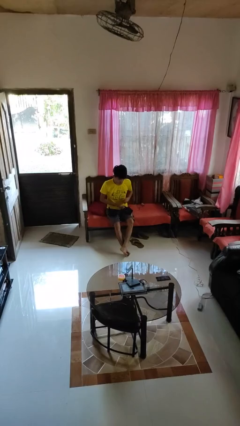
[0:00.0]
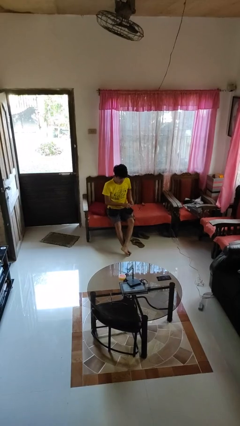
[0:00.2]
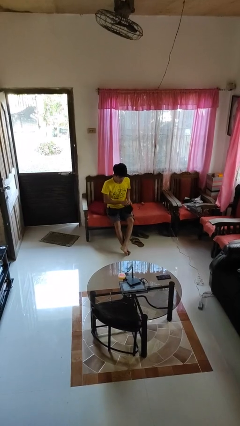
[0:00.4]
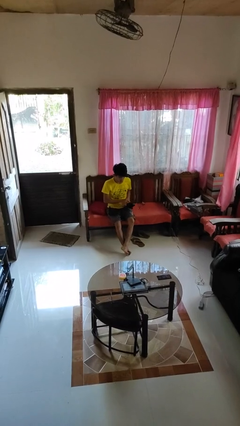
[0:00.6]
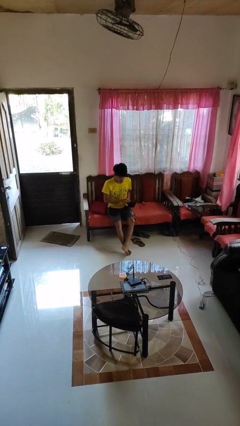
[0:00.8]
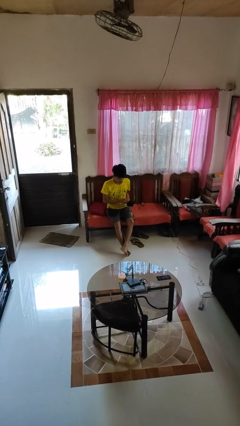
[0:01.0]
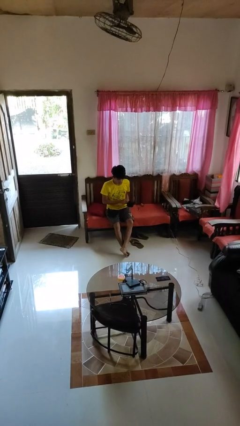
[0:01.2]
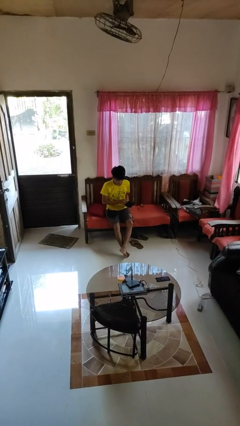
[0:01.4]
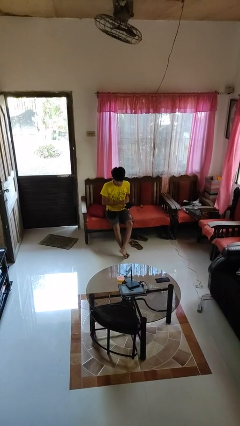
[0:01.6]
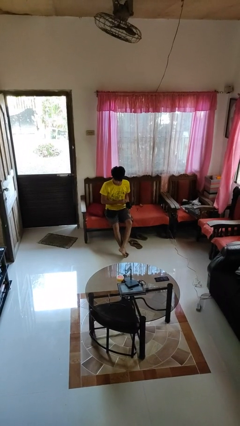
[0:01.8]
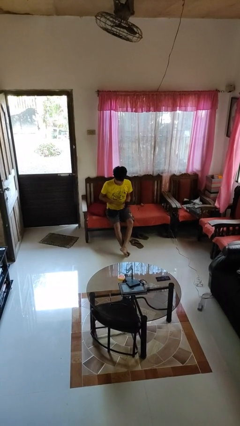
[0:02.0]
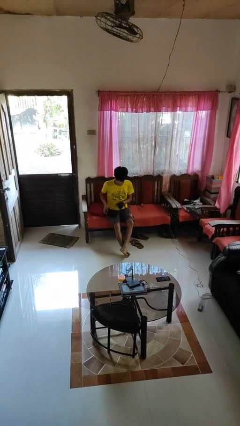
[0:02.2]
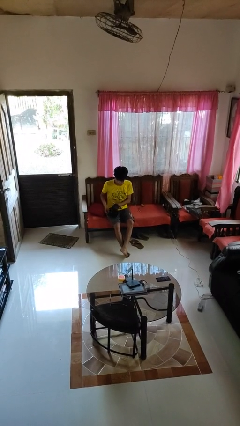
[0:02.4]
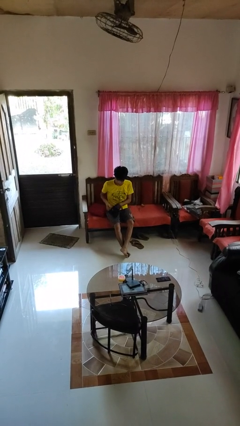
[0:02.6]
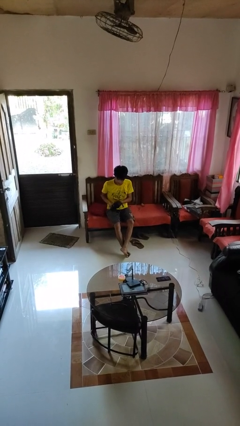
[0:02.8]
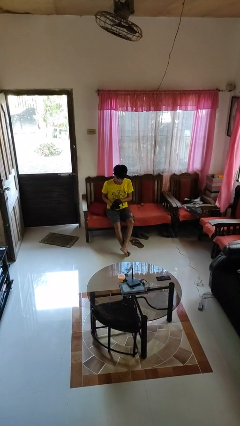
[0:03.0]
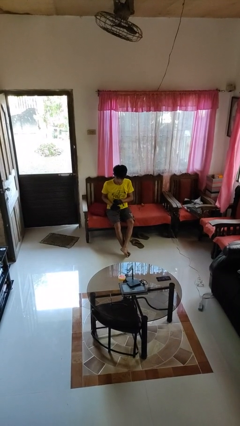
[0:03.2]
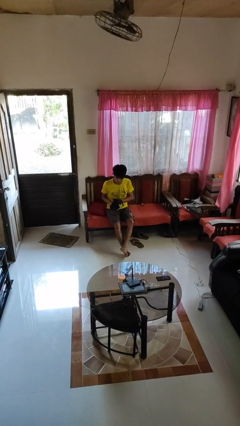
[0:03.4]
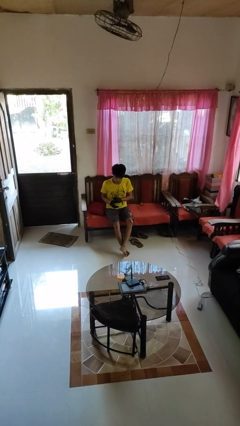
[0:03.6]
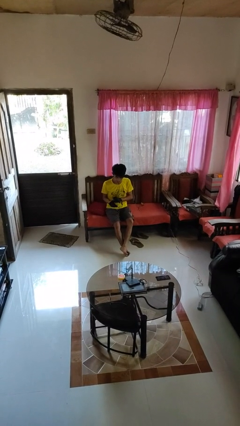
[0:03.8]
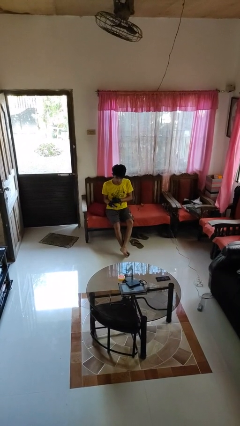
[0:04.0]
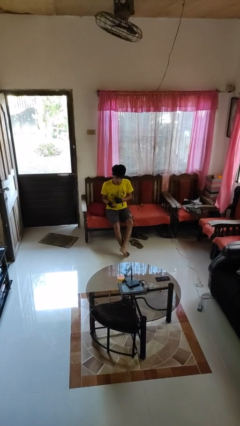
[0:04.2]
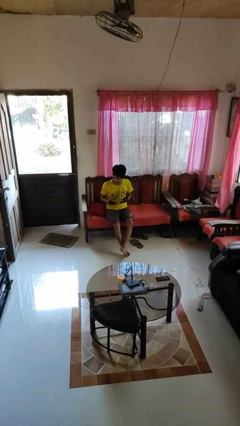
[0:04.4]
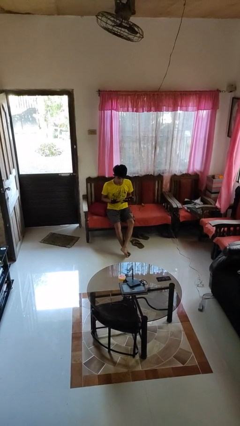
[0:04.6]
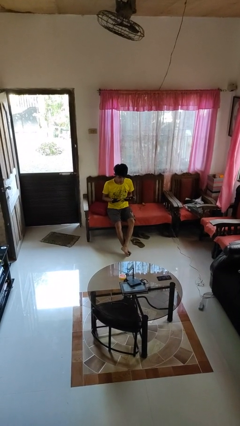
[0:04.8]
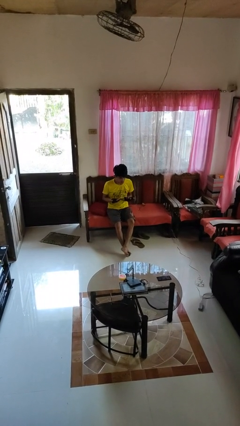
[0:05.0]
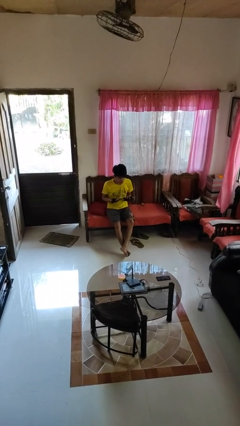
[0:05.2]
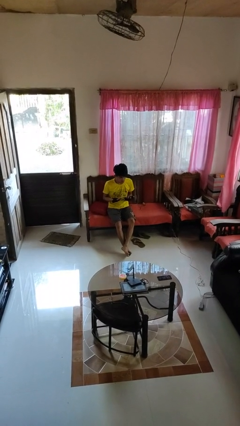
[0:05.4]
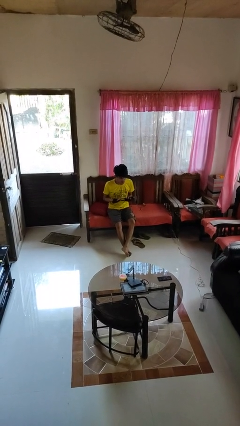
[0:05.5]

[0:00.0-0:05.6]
person puts on gloves

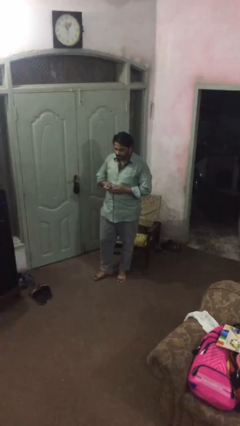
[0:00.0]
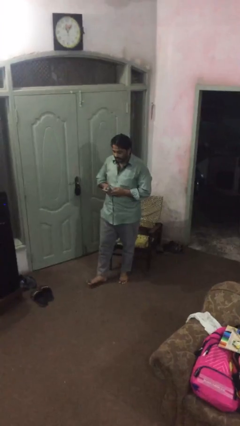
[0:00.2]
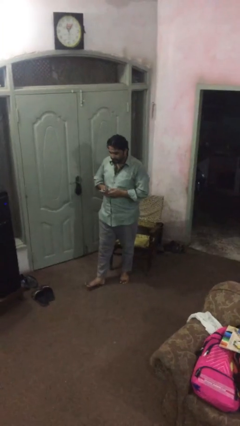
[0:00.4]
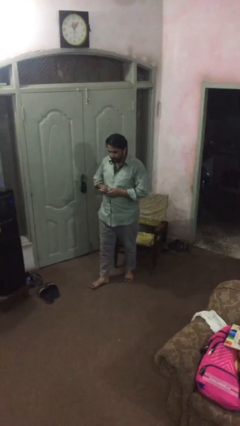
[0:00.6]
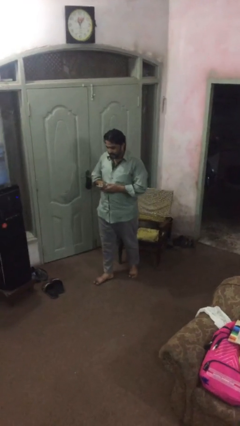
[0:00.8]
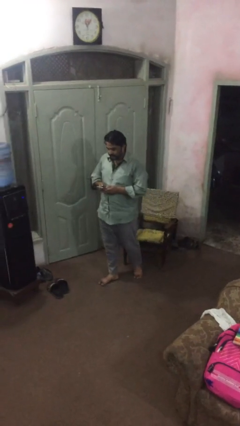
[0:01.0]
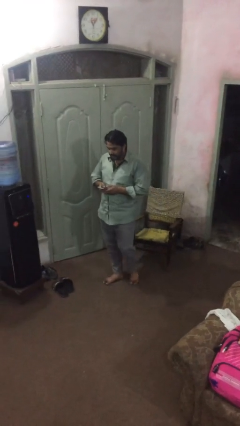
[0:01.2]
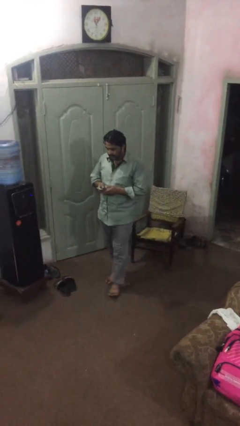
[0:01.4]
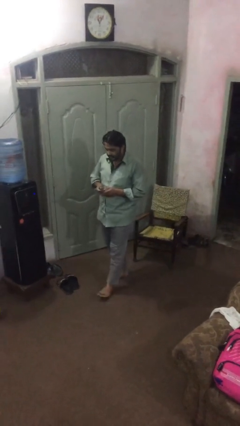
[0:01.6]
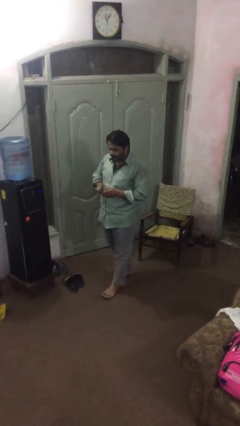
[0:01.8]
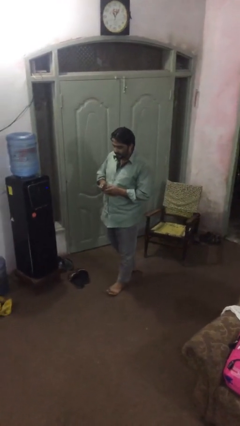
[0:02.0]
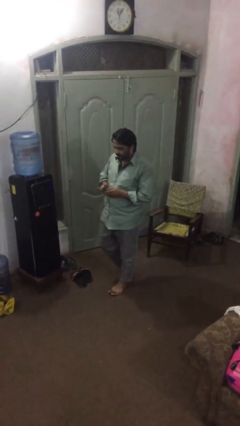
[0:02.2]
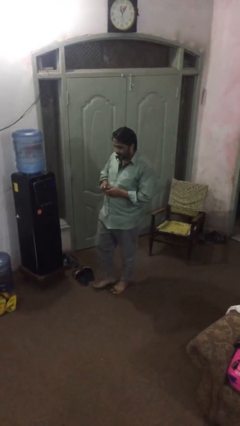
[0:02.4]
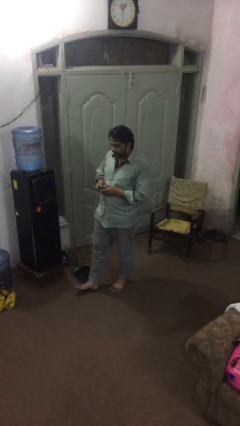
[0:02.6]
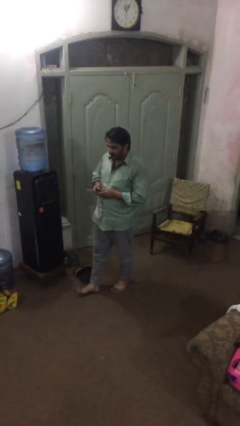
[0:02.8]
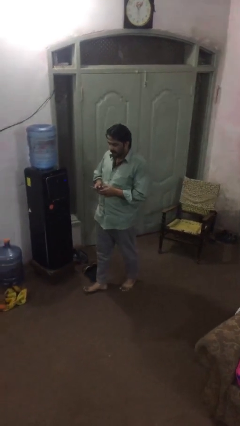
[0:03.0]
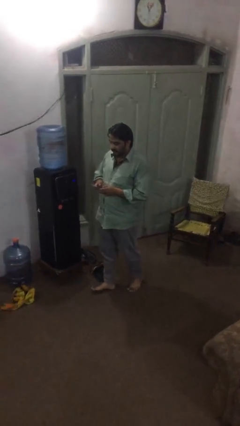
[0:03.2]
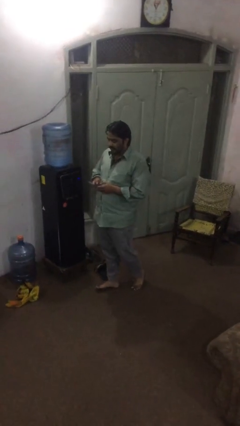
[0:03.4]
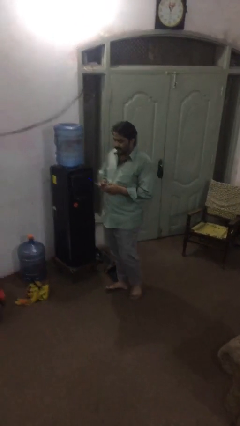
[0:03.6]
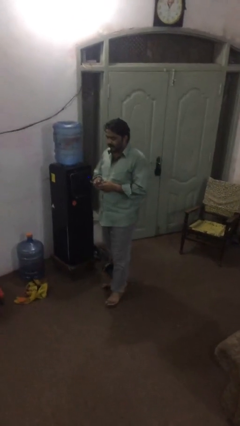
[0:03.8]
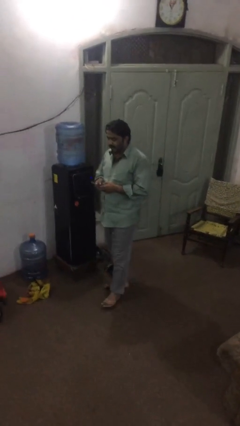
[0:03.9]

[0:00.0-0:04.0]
person texts on phone

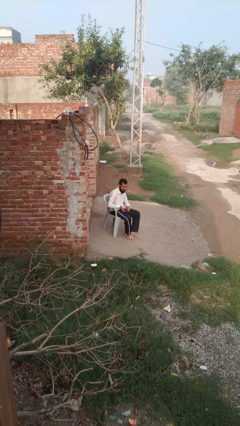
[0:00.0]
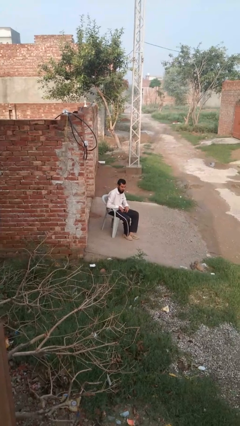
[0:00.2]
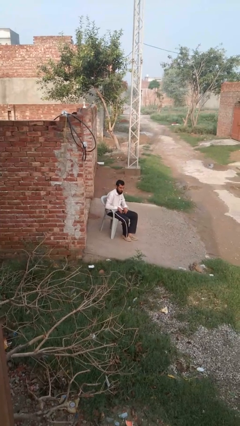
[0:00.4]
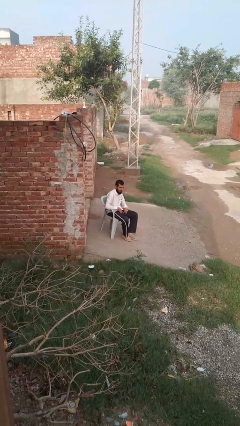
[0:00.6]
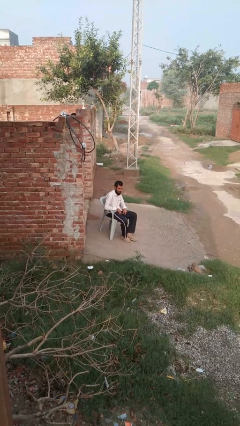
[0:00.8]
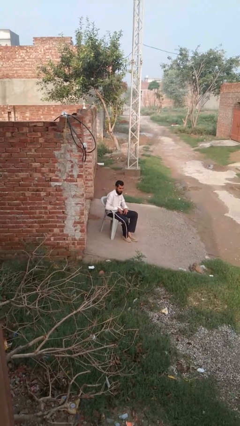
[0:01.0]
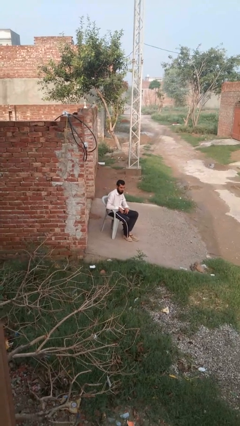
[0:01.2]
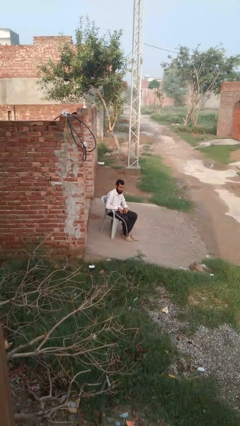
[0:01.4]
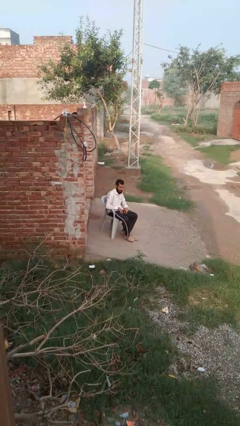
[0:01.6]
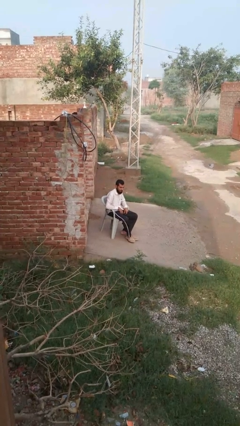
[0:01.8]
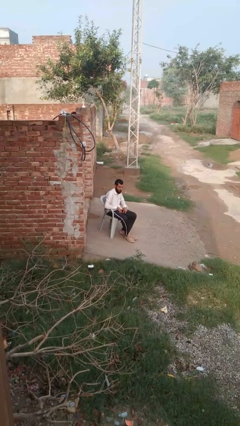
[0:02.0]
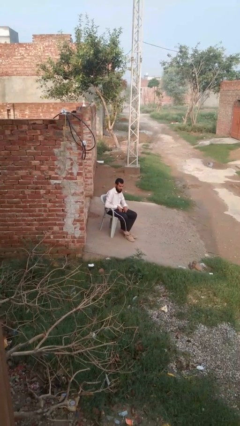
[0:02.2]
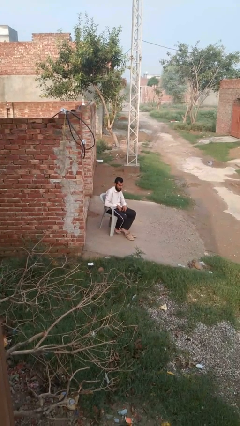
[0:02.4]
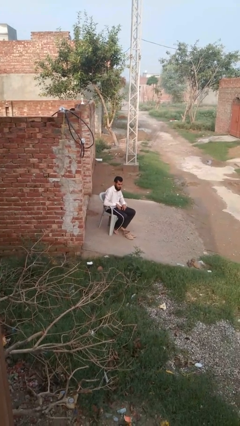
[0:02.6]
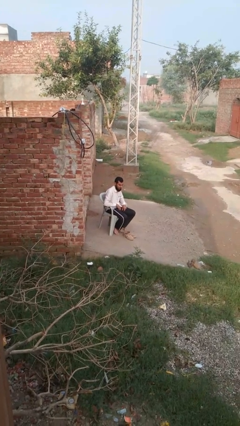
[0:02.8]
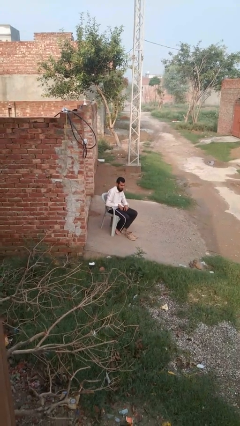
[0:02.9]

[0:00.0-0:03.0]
person takes off shoes

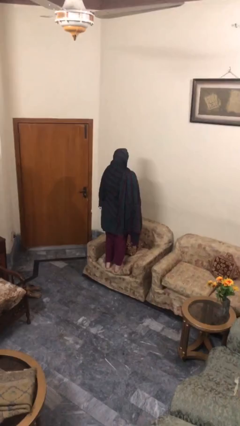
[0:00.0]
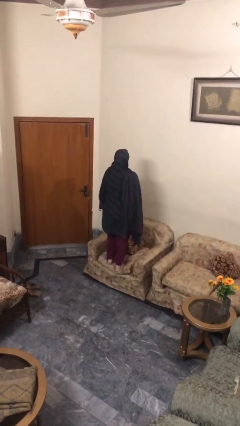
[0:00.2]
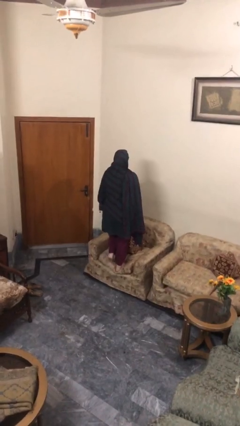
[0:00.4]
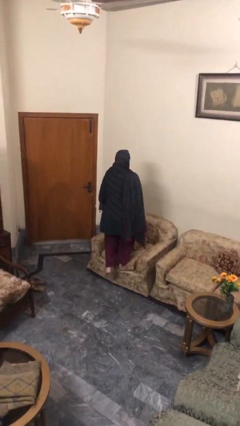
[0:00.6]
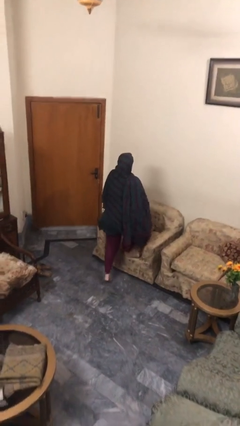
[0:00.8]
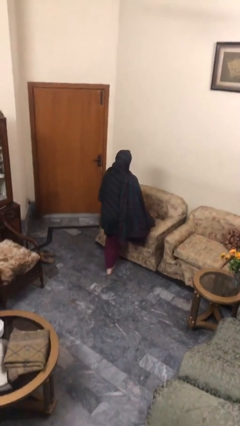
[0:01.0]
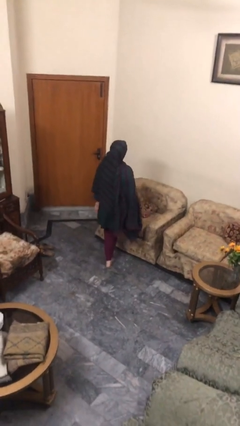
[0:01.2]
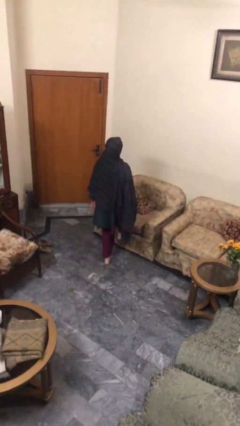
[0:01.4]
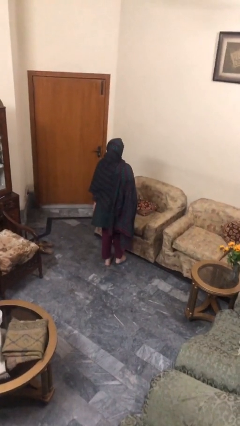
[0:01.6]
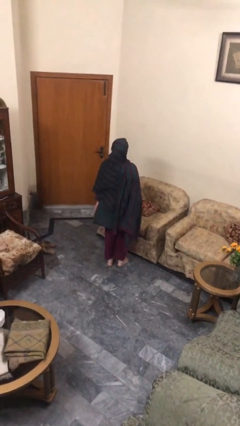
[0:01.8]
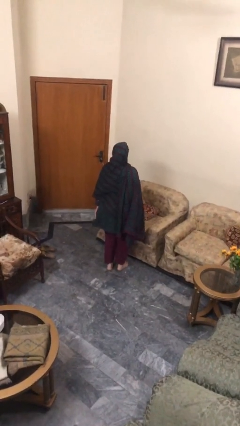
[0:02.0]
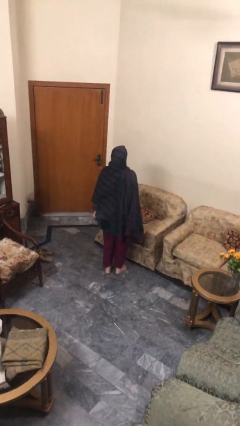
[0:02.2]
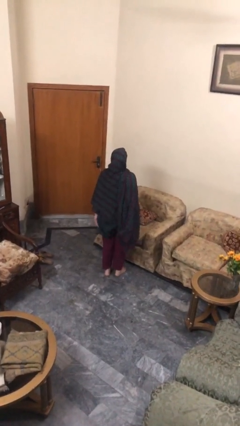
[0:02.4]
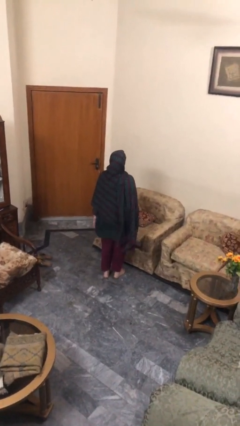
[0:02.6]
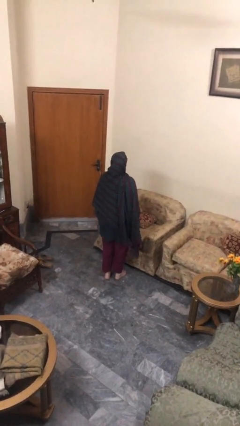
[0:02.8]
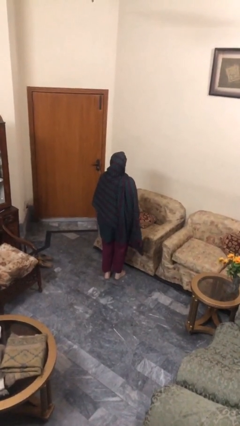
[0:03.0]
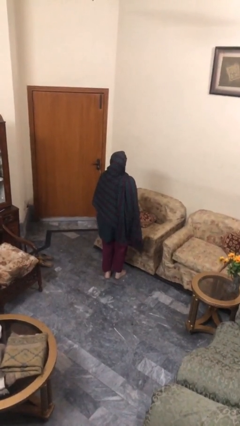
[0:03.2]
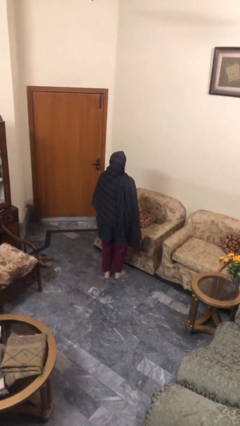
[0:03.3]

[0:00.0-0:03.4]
person climbs off couch

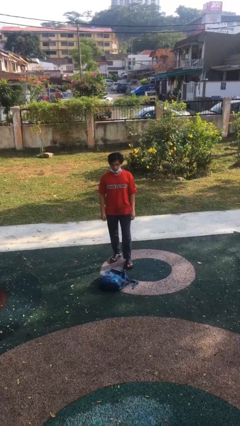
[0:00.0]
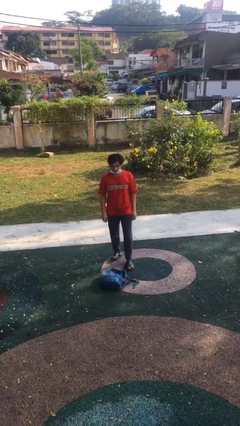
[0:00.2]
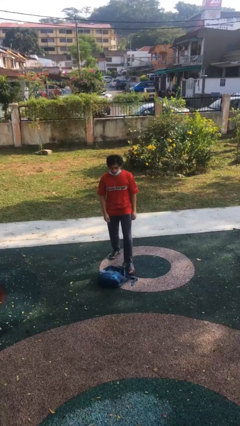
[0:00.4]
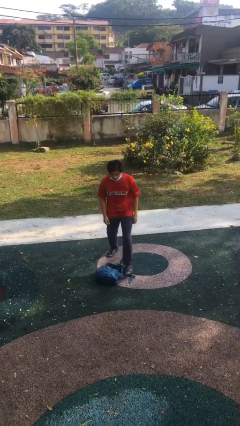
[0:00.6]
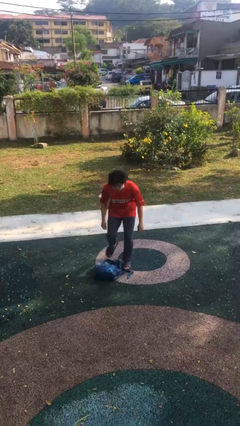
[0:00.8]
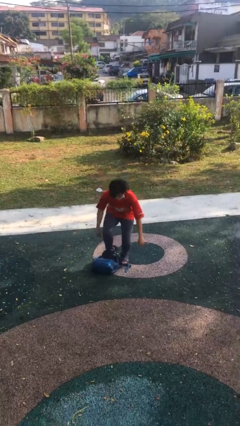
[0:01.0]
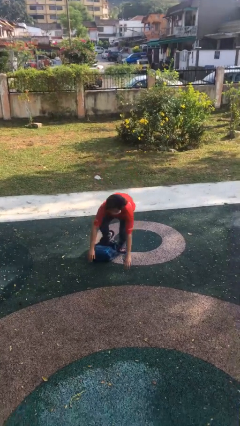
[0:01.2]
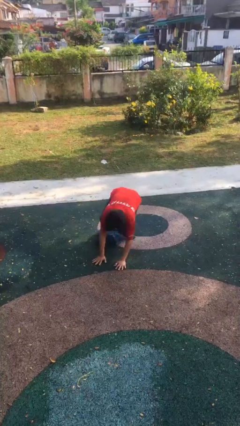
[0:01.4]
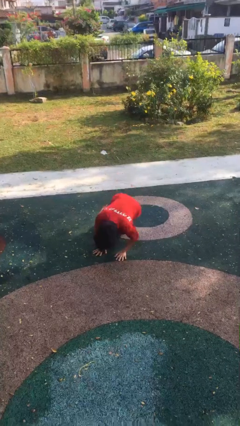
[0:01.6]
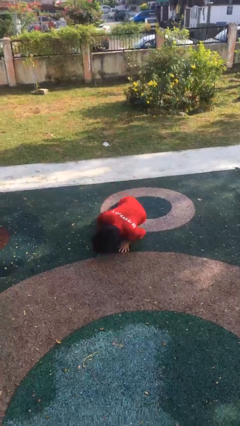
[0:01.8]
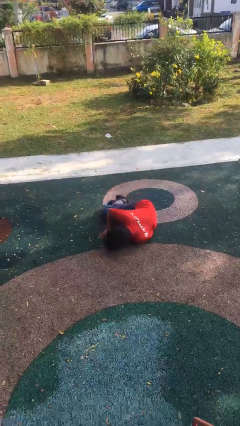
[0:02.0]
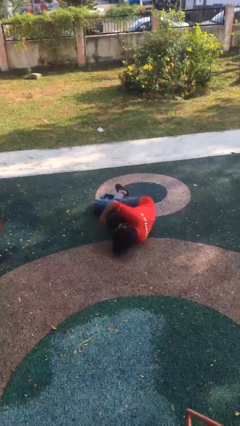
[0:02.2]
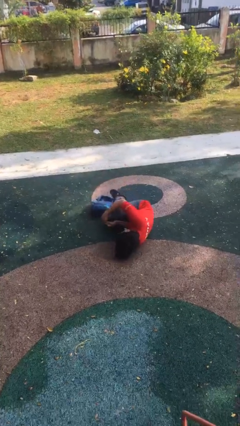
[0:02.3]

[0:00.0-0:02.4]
person trips on object on floor
